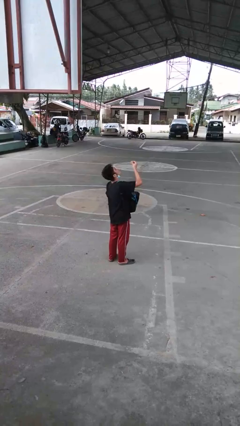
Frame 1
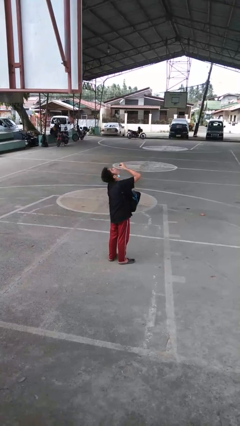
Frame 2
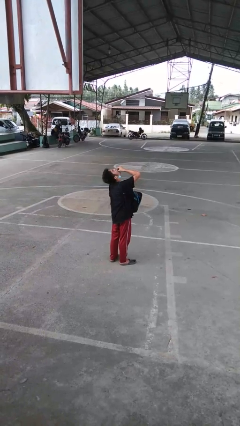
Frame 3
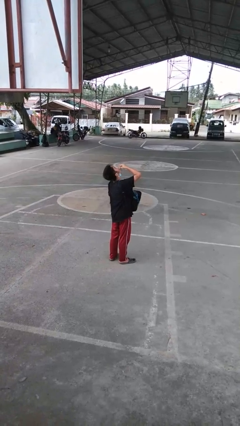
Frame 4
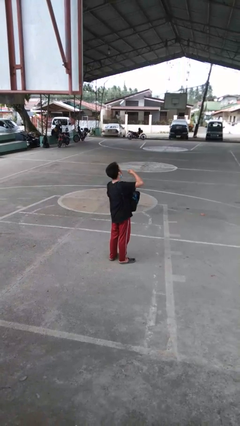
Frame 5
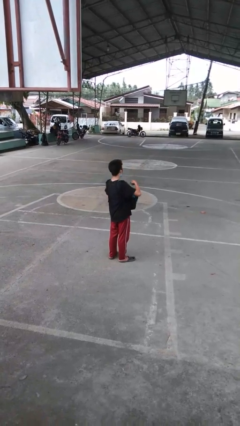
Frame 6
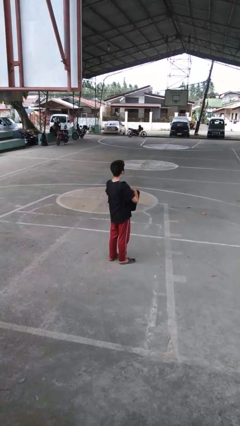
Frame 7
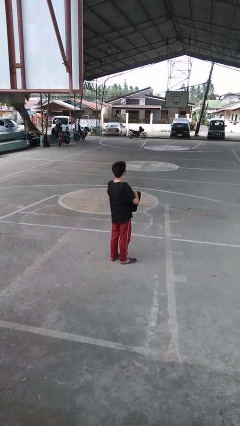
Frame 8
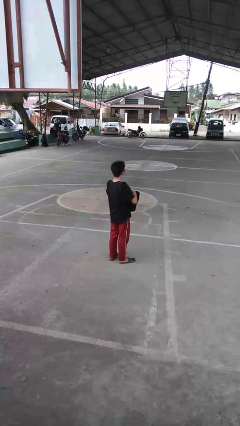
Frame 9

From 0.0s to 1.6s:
person eats snack from bag

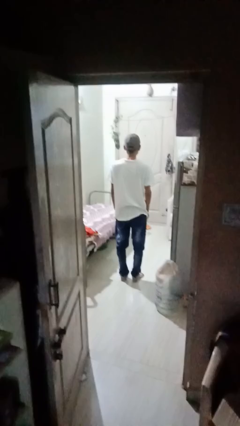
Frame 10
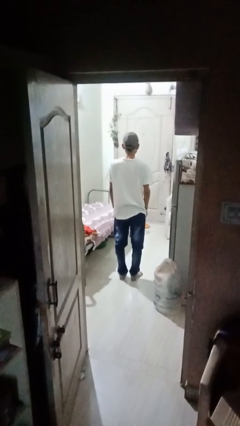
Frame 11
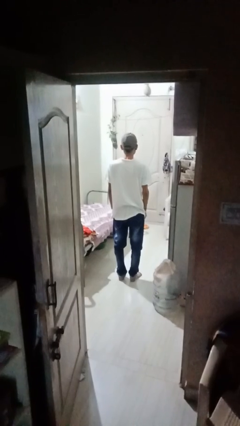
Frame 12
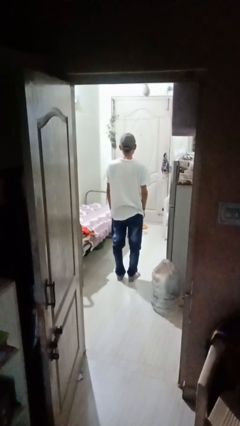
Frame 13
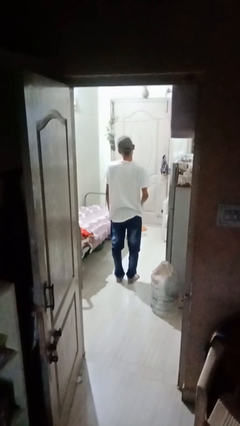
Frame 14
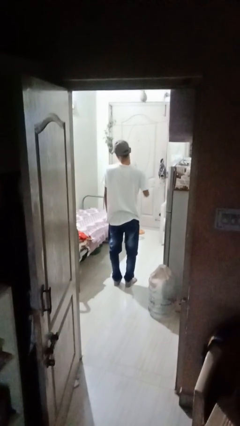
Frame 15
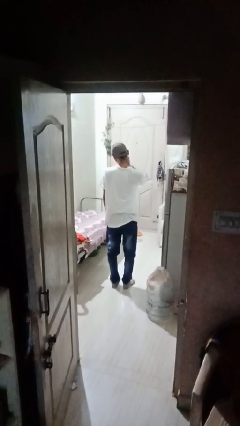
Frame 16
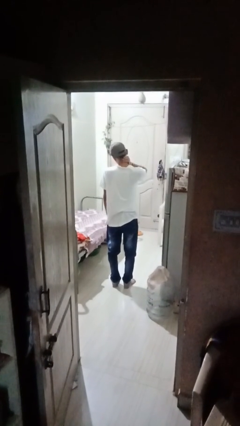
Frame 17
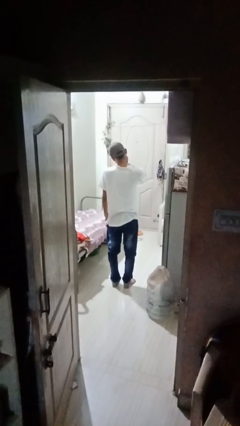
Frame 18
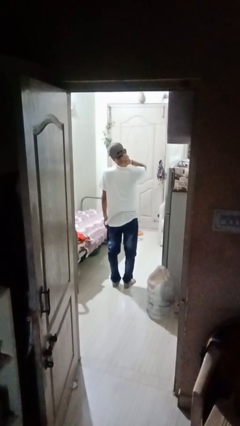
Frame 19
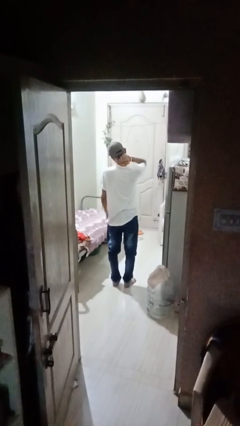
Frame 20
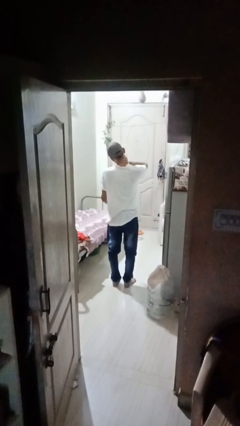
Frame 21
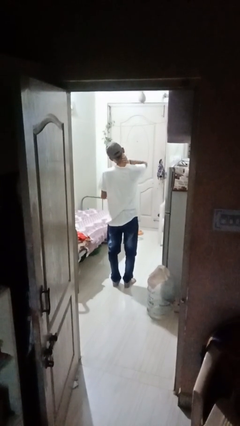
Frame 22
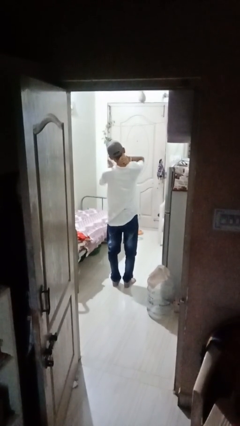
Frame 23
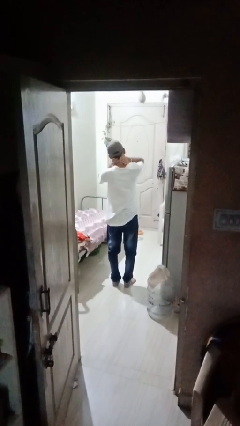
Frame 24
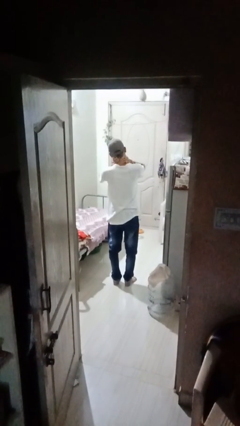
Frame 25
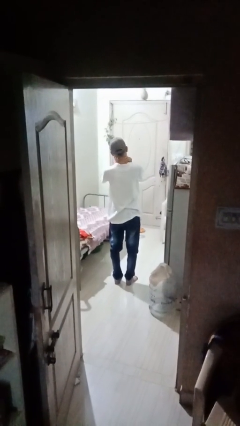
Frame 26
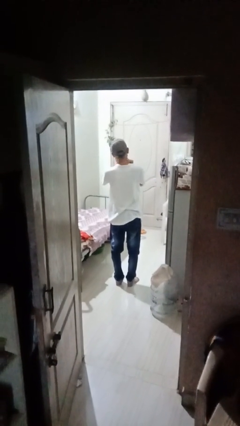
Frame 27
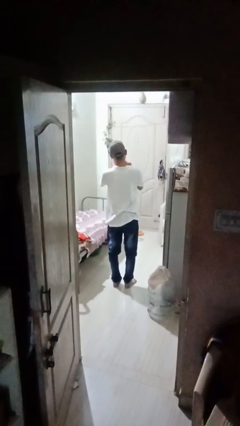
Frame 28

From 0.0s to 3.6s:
person rubs neck

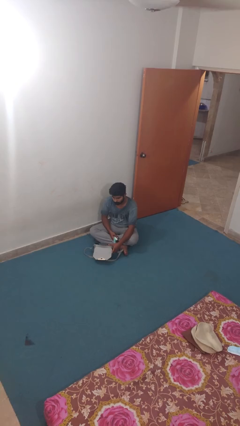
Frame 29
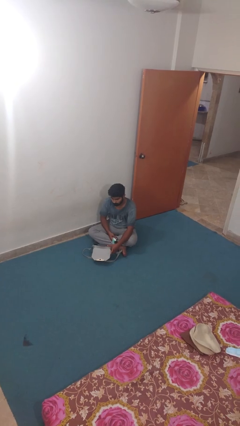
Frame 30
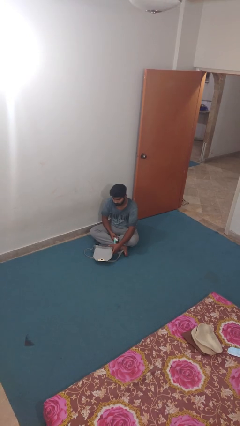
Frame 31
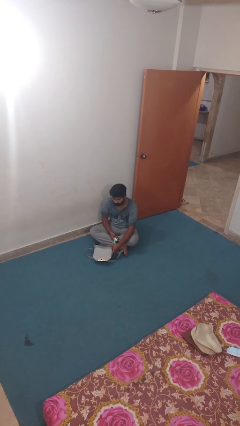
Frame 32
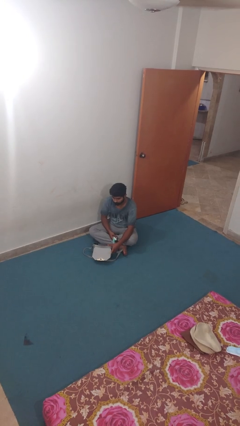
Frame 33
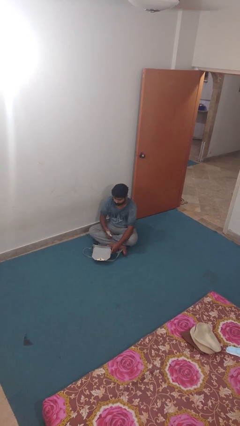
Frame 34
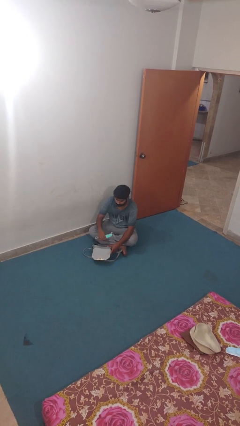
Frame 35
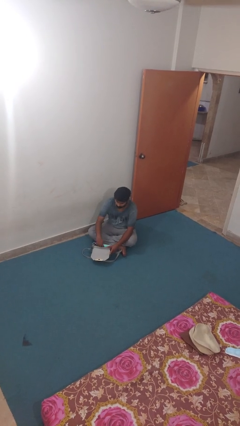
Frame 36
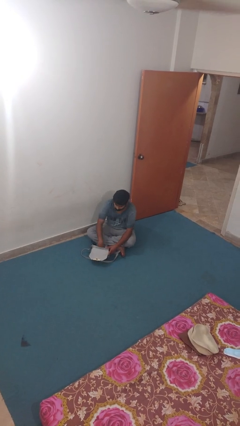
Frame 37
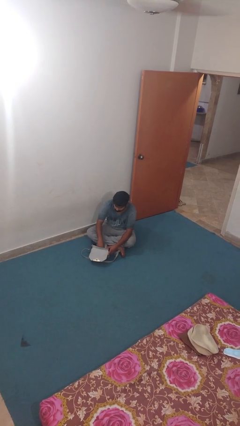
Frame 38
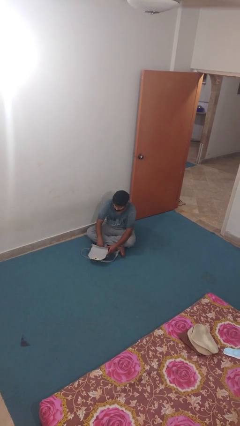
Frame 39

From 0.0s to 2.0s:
person puts object into purse

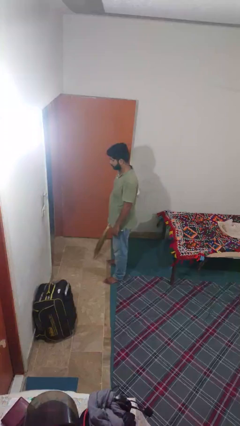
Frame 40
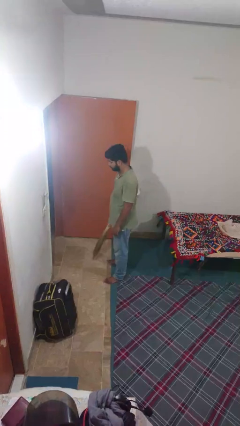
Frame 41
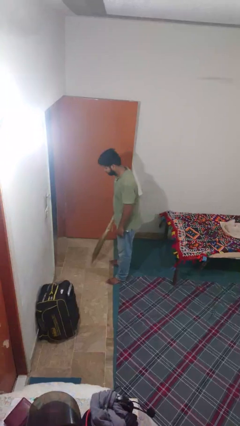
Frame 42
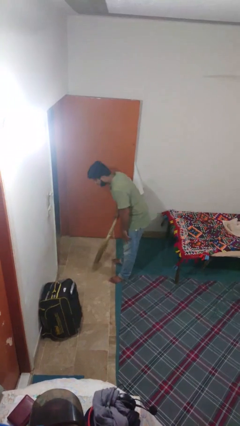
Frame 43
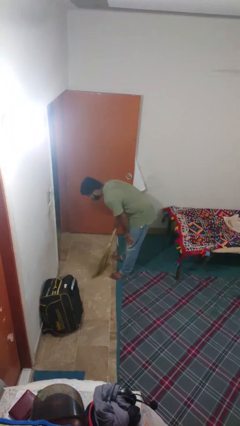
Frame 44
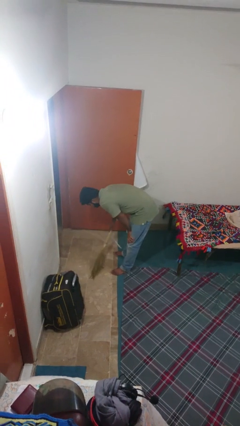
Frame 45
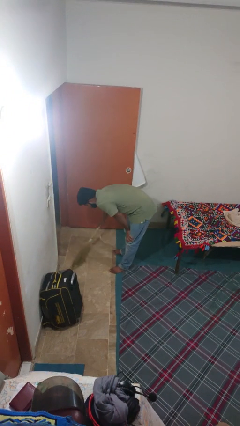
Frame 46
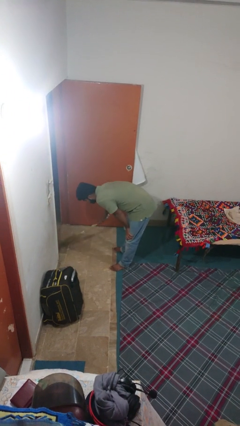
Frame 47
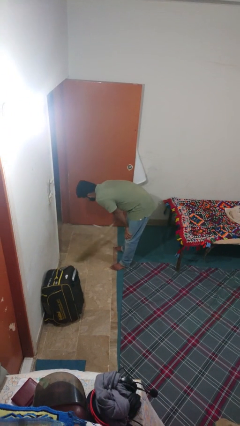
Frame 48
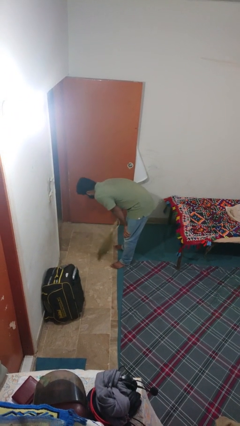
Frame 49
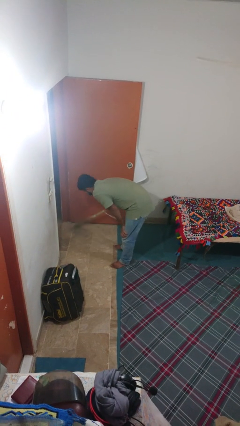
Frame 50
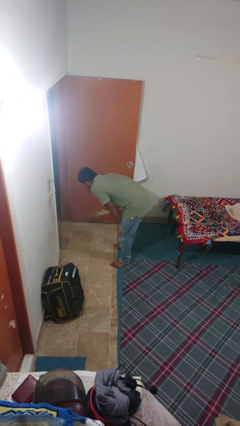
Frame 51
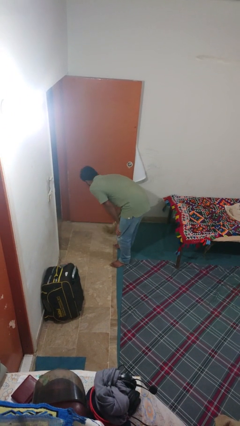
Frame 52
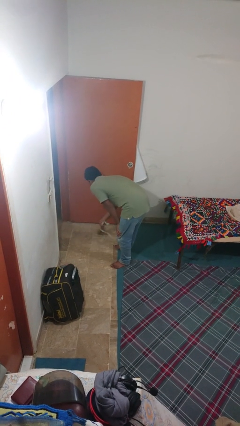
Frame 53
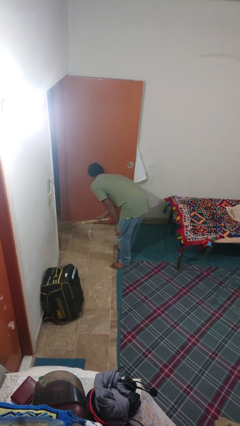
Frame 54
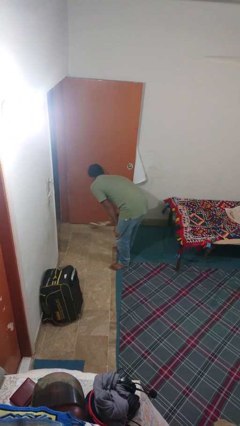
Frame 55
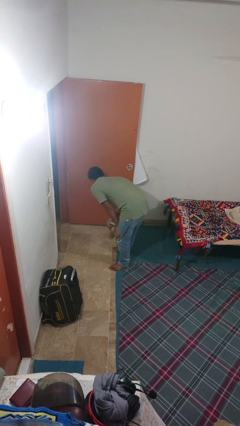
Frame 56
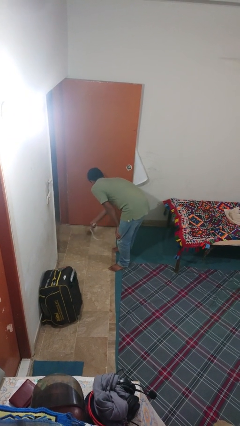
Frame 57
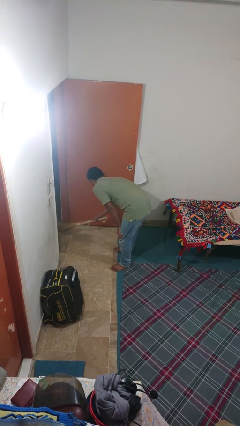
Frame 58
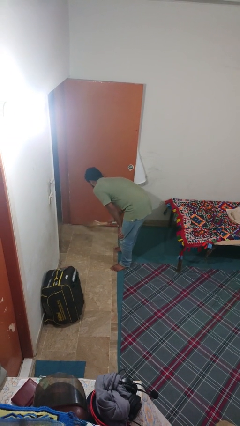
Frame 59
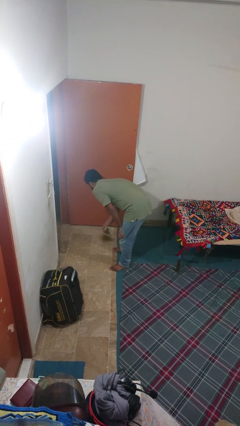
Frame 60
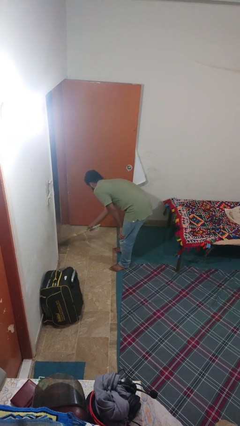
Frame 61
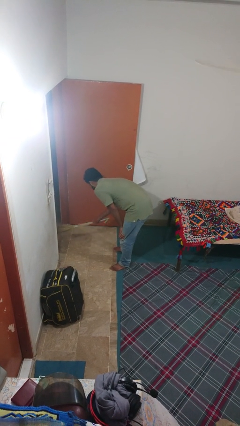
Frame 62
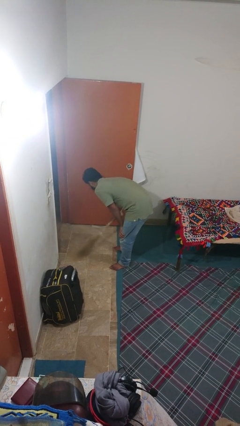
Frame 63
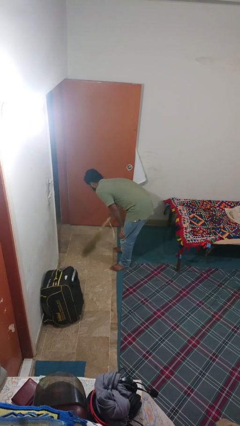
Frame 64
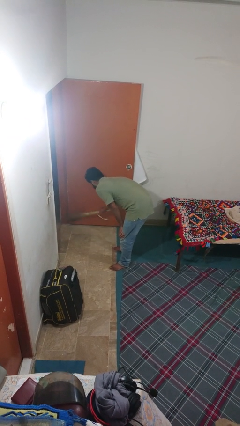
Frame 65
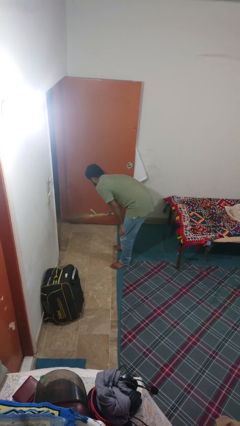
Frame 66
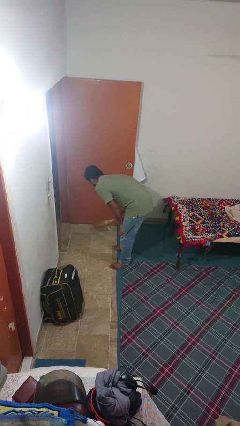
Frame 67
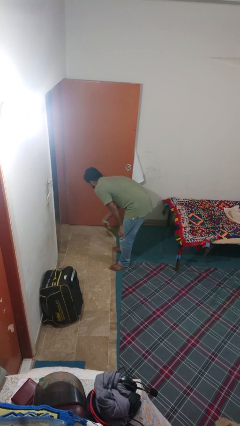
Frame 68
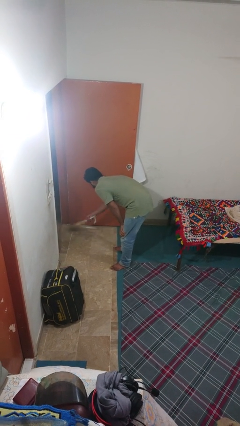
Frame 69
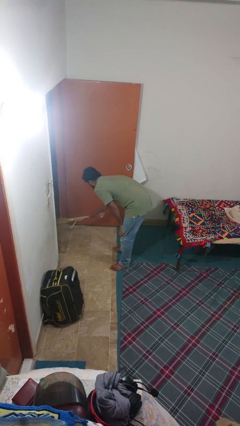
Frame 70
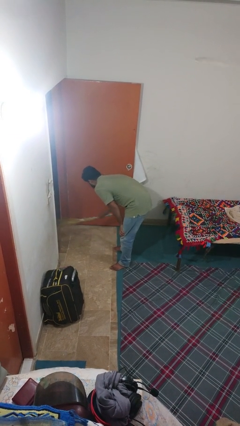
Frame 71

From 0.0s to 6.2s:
person sweeps floor

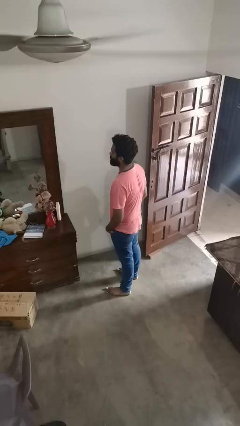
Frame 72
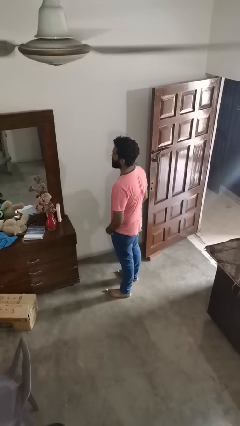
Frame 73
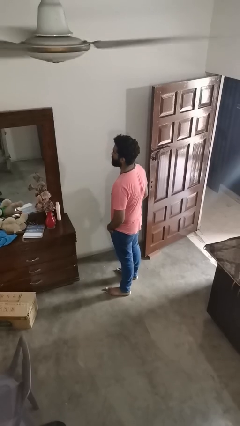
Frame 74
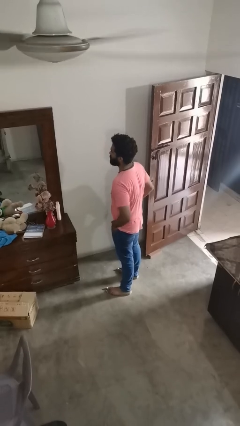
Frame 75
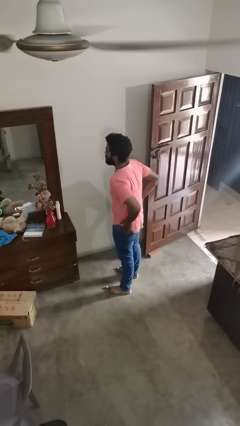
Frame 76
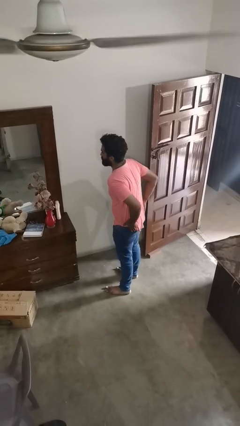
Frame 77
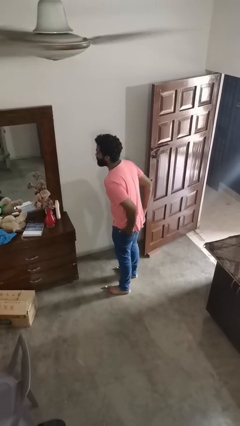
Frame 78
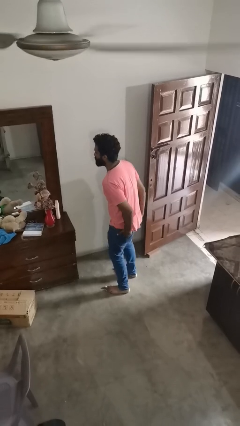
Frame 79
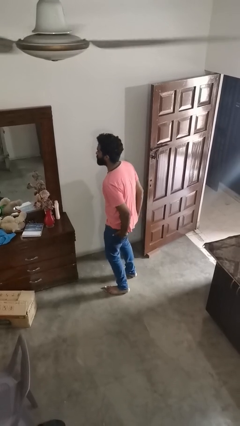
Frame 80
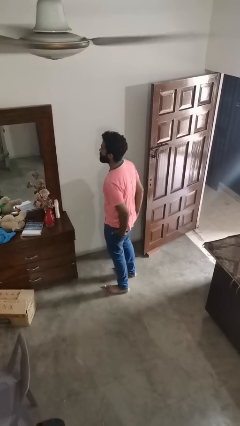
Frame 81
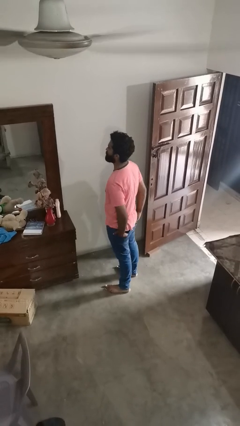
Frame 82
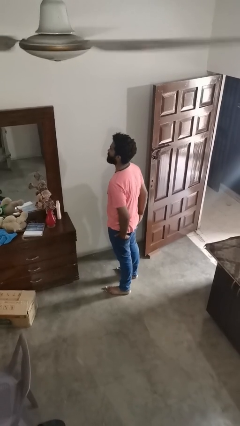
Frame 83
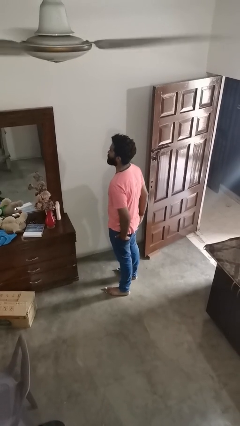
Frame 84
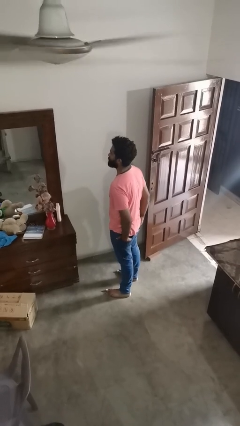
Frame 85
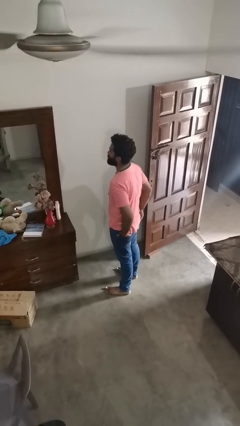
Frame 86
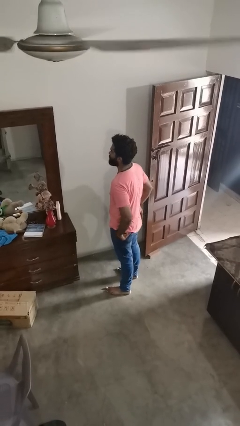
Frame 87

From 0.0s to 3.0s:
person puts hands in back pockets

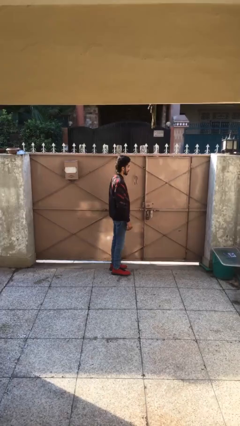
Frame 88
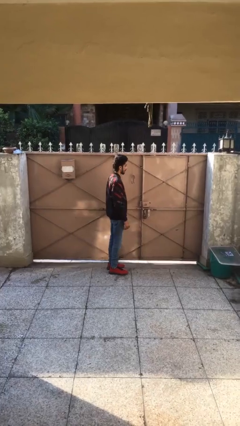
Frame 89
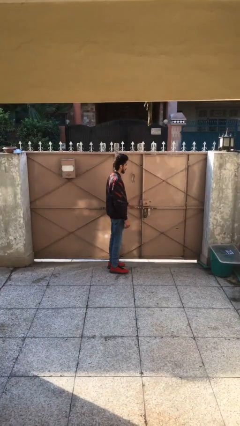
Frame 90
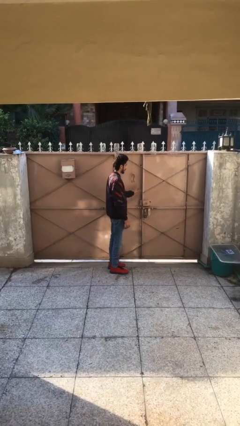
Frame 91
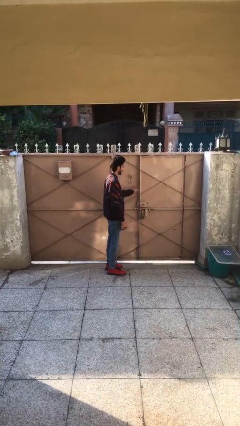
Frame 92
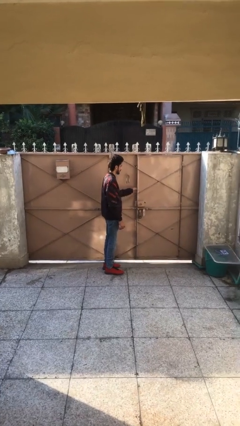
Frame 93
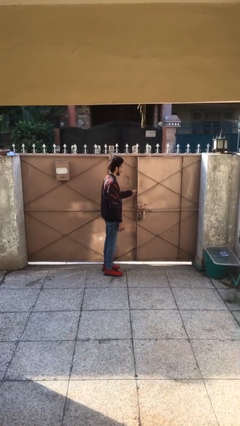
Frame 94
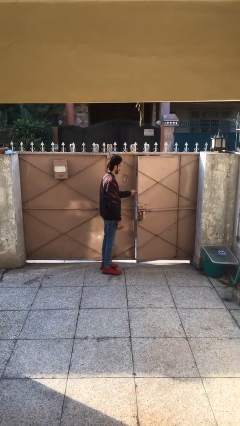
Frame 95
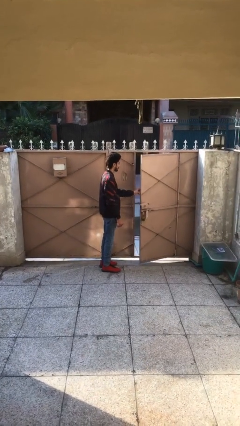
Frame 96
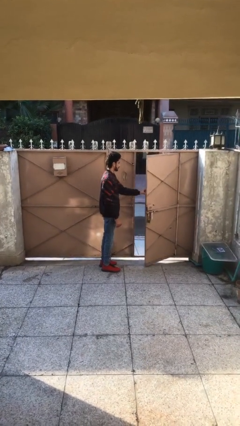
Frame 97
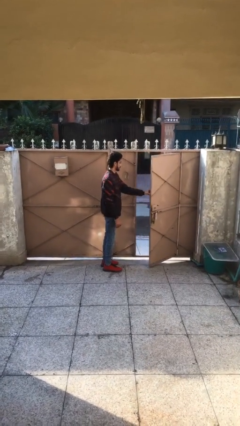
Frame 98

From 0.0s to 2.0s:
person opens facility door
